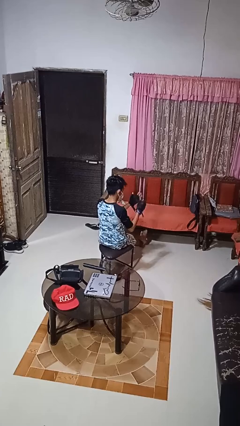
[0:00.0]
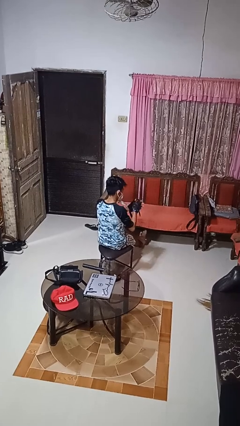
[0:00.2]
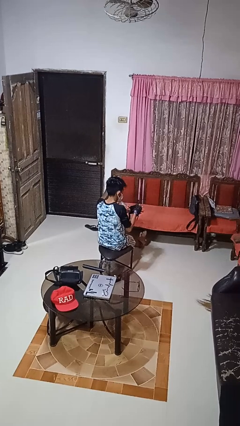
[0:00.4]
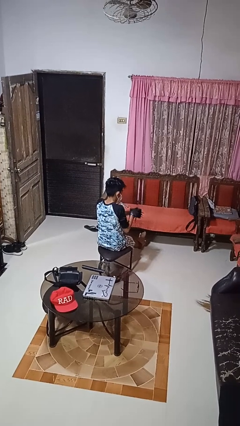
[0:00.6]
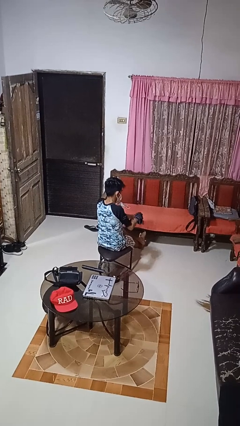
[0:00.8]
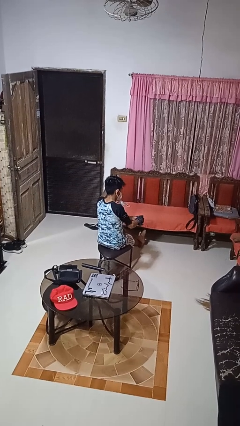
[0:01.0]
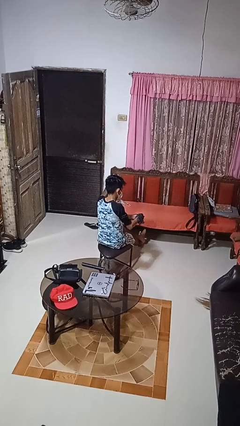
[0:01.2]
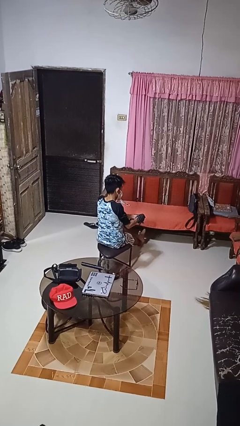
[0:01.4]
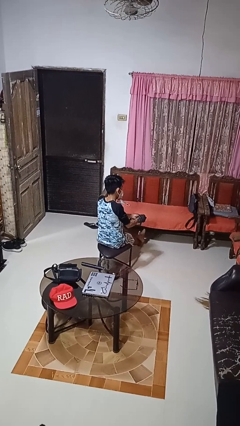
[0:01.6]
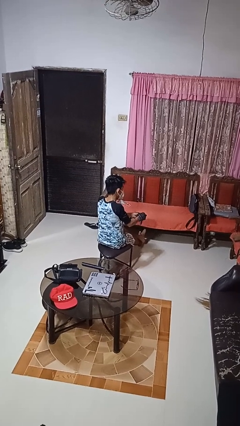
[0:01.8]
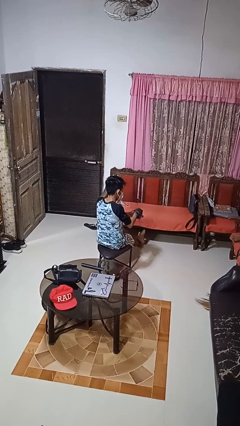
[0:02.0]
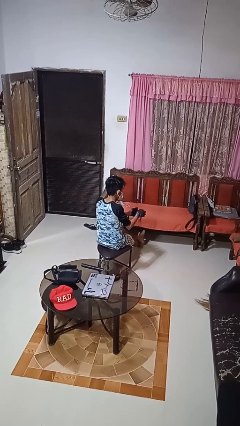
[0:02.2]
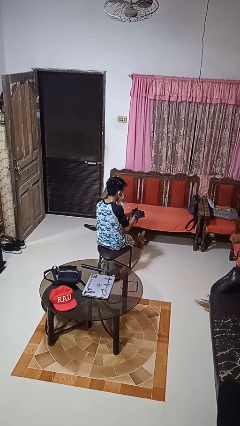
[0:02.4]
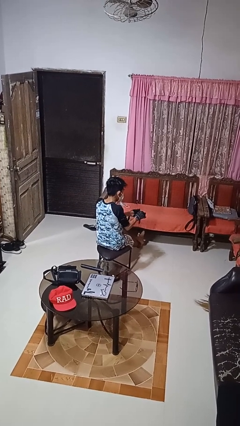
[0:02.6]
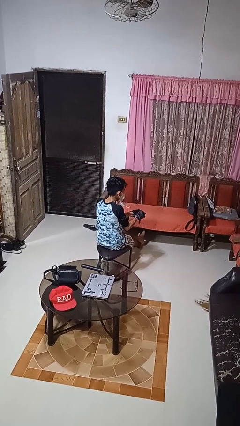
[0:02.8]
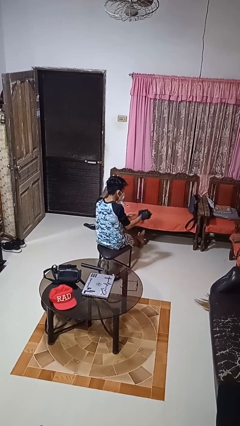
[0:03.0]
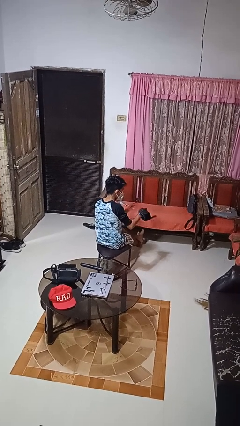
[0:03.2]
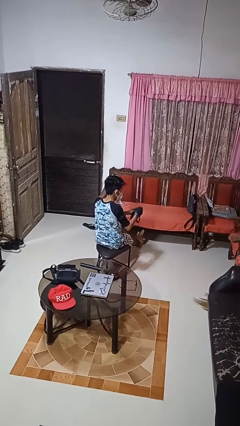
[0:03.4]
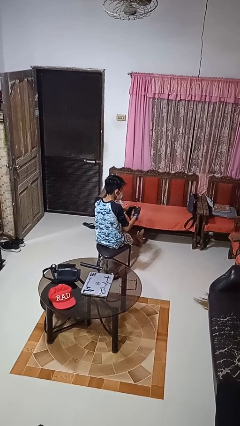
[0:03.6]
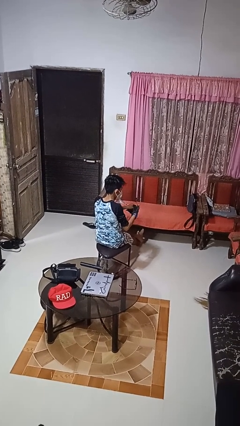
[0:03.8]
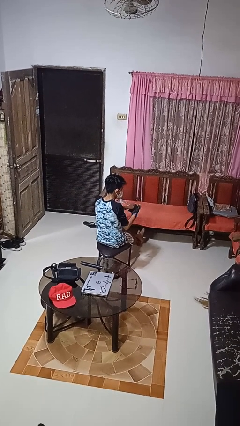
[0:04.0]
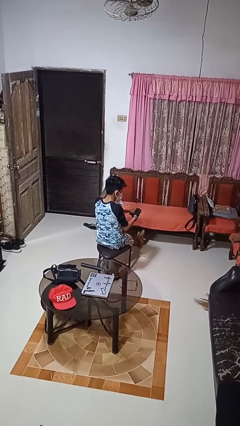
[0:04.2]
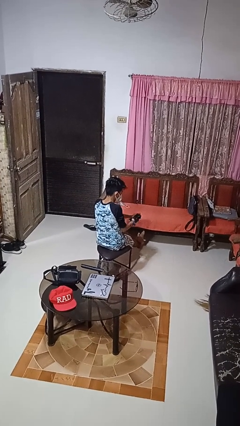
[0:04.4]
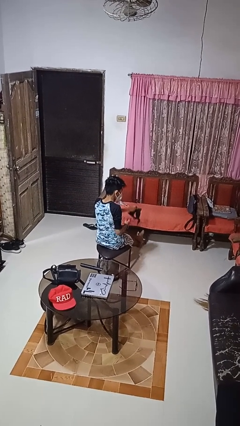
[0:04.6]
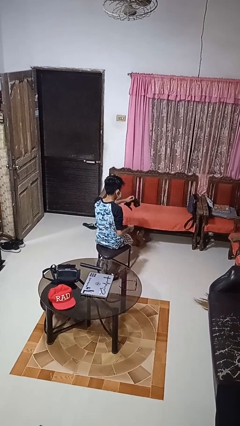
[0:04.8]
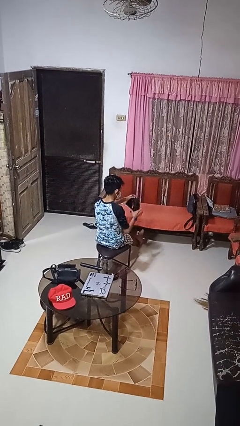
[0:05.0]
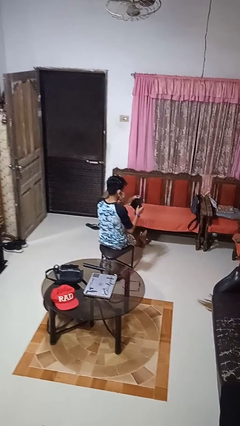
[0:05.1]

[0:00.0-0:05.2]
person takes off gloves

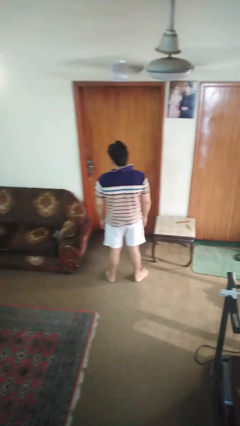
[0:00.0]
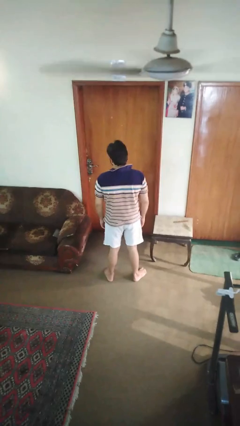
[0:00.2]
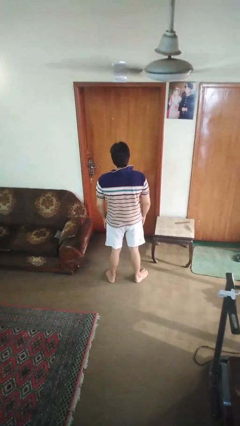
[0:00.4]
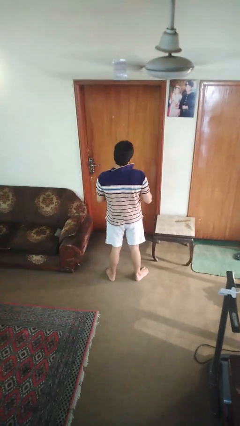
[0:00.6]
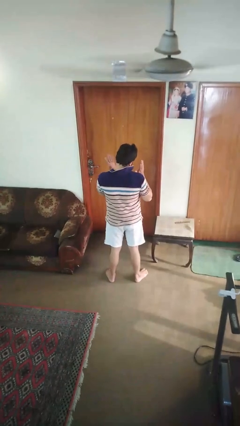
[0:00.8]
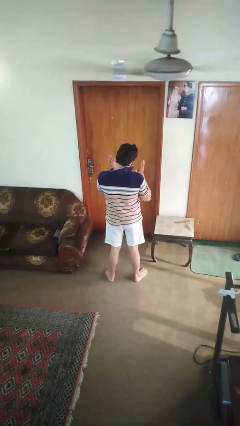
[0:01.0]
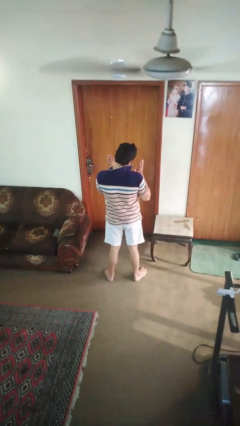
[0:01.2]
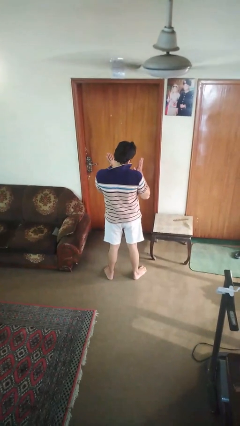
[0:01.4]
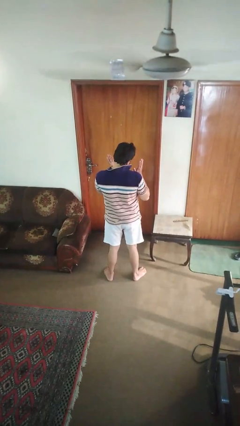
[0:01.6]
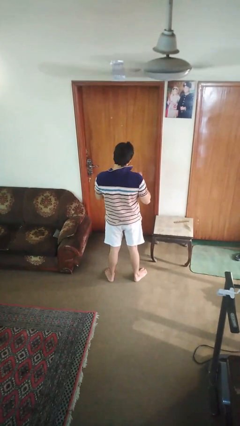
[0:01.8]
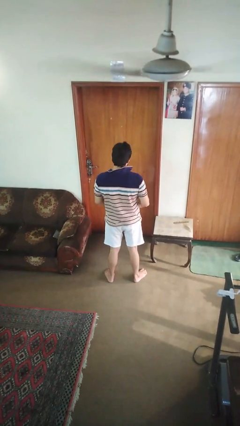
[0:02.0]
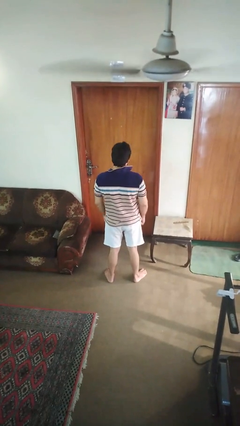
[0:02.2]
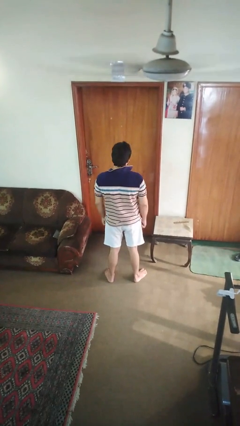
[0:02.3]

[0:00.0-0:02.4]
person shrugs

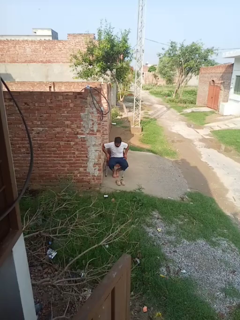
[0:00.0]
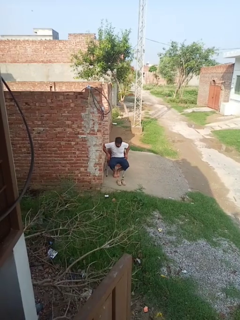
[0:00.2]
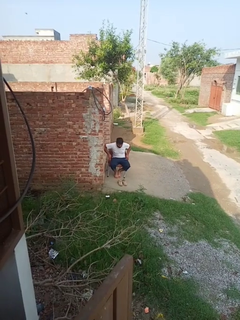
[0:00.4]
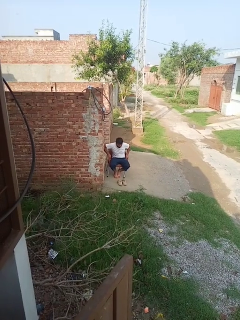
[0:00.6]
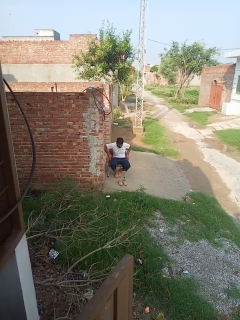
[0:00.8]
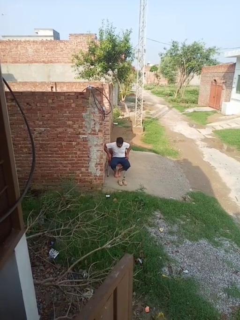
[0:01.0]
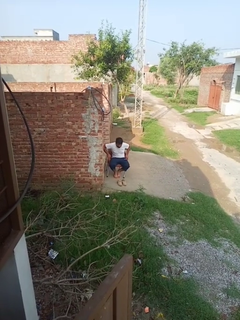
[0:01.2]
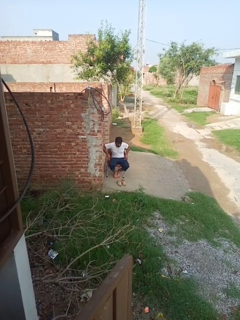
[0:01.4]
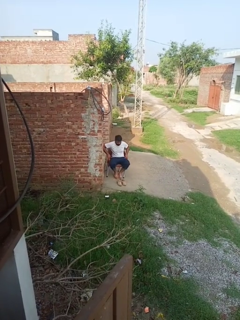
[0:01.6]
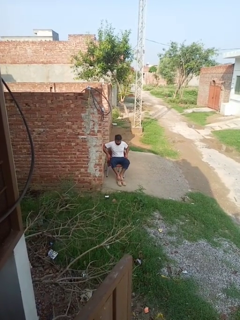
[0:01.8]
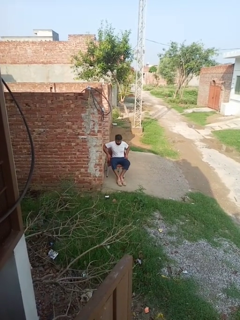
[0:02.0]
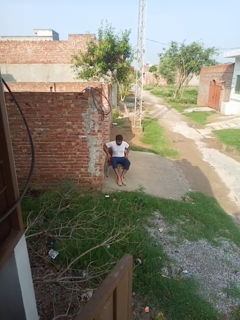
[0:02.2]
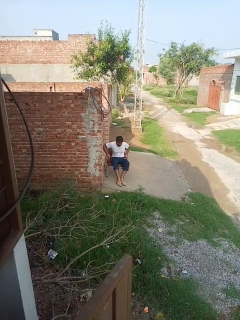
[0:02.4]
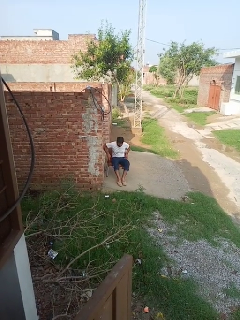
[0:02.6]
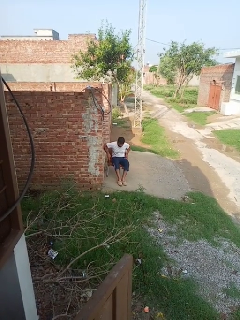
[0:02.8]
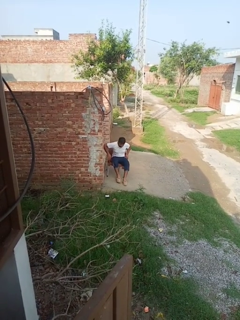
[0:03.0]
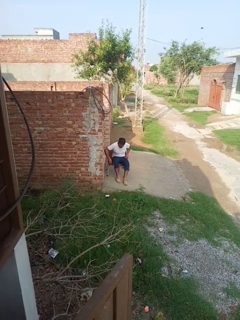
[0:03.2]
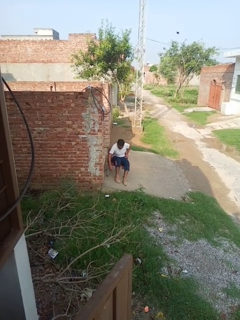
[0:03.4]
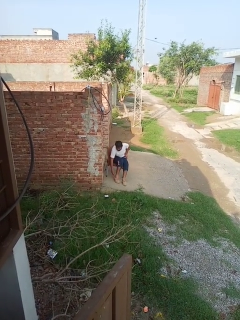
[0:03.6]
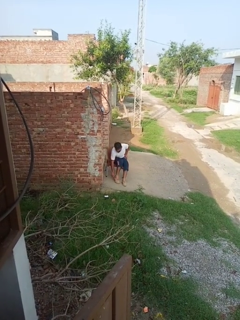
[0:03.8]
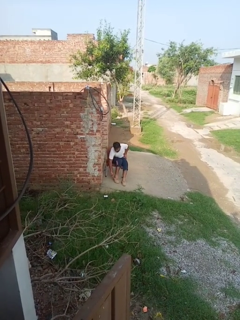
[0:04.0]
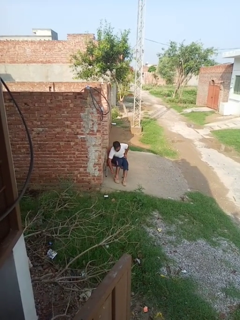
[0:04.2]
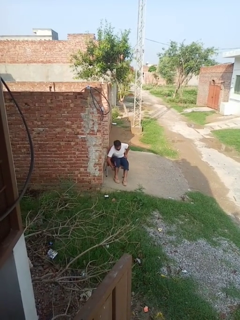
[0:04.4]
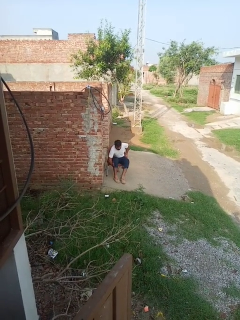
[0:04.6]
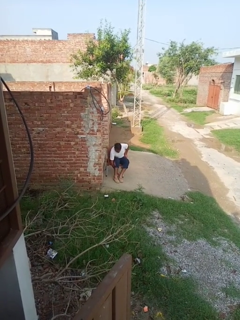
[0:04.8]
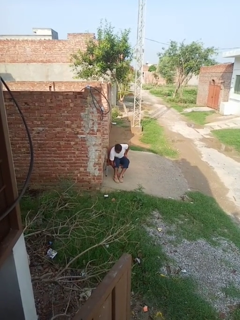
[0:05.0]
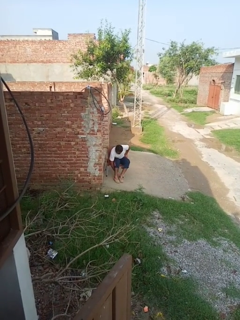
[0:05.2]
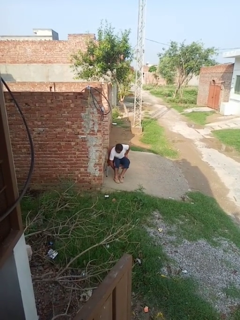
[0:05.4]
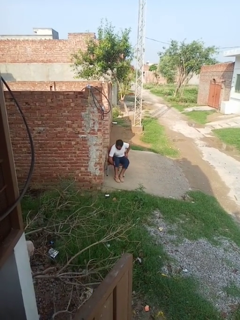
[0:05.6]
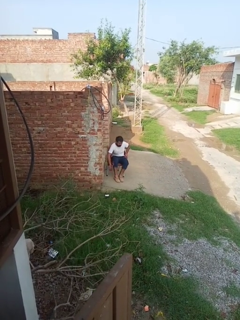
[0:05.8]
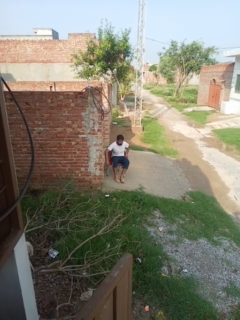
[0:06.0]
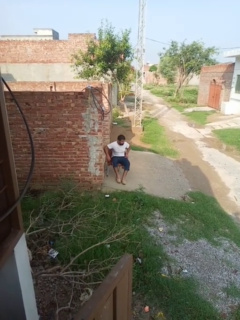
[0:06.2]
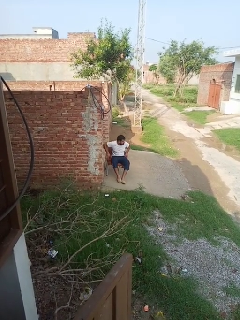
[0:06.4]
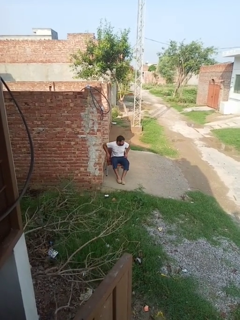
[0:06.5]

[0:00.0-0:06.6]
person puts on shoes

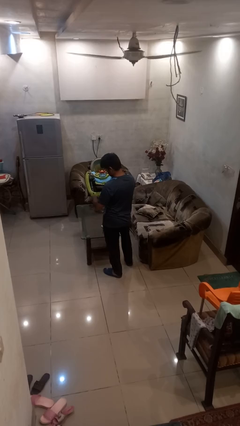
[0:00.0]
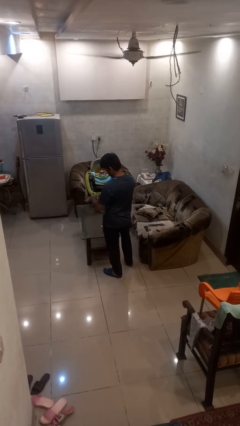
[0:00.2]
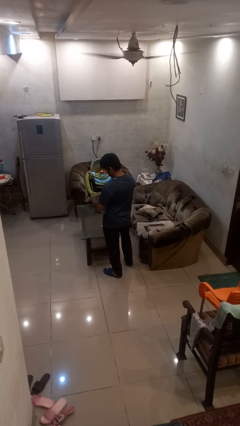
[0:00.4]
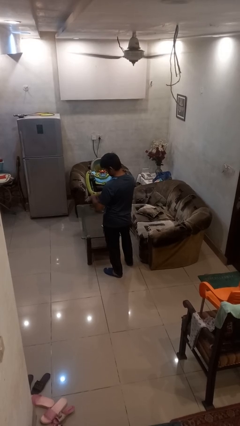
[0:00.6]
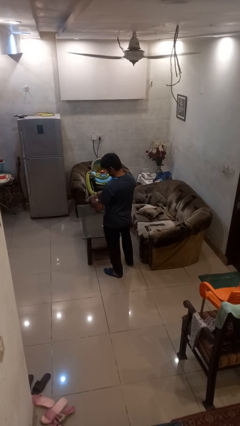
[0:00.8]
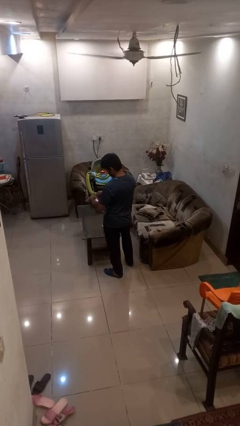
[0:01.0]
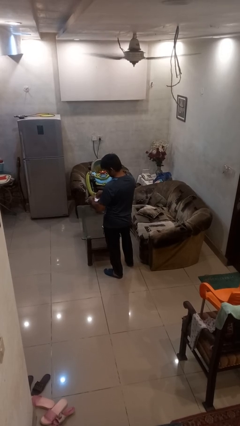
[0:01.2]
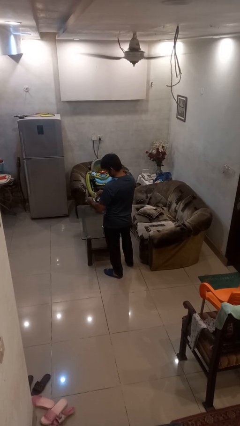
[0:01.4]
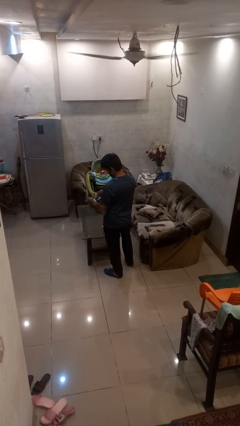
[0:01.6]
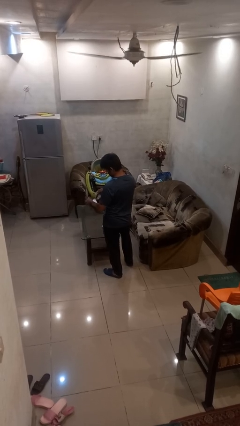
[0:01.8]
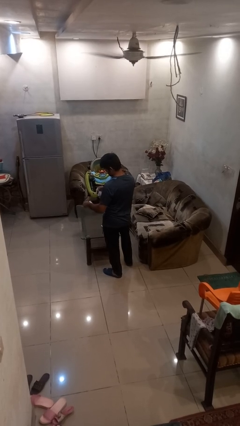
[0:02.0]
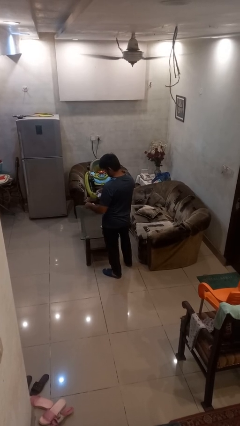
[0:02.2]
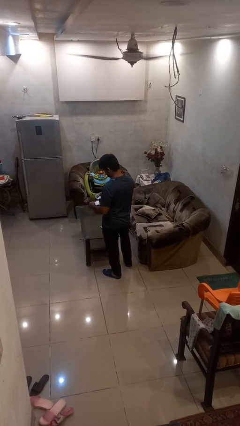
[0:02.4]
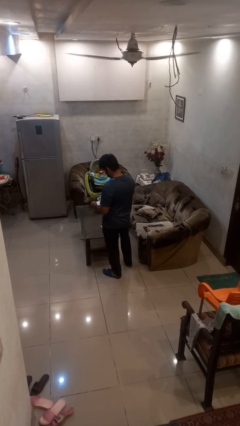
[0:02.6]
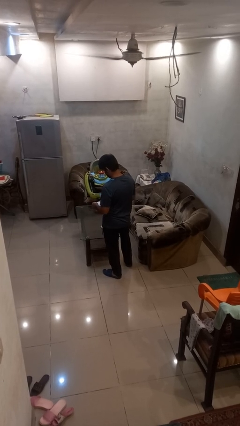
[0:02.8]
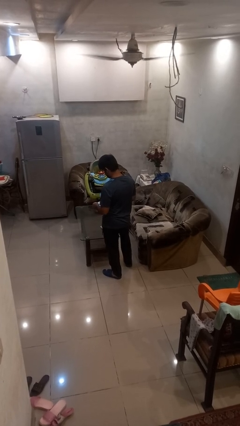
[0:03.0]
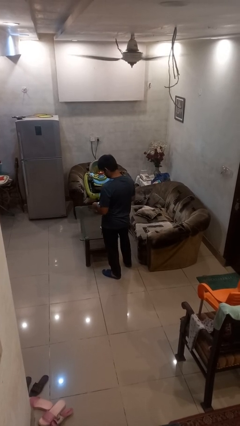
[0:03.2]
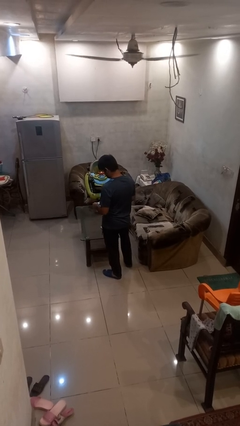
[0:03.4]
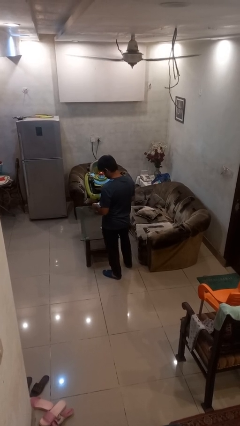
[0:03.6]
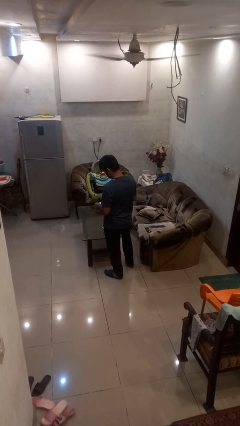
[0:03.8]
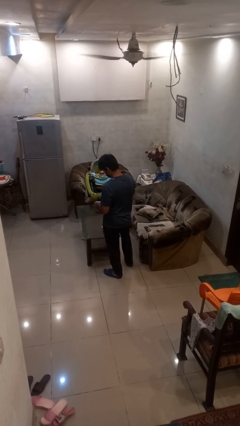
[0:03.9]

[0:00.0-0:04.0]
person tears paper

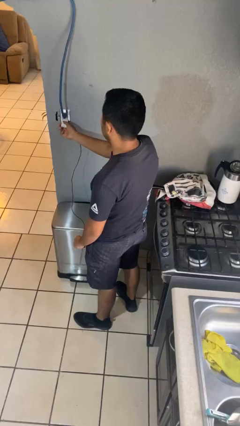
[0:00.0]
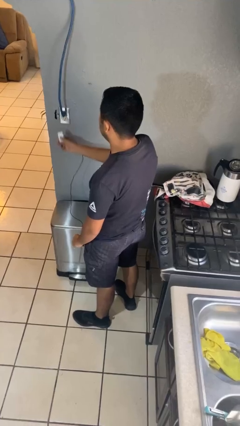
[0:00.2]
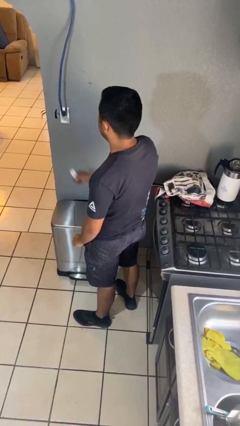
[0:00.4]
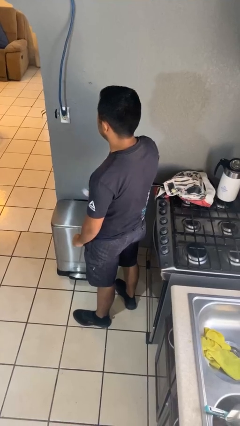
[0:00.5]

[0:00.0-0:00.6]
person unplugs from electrical socket

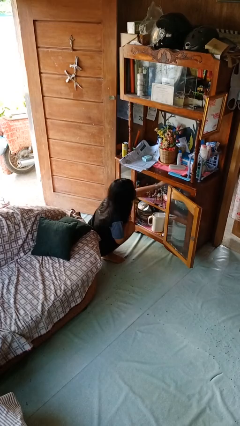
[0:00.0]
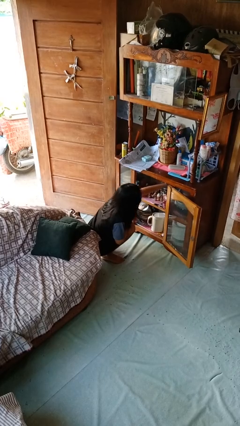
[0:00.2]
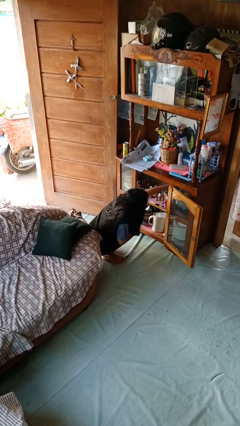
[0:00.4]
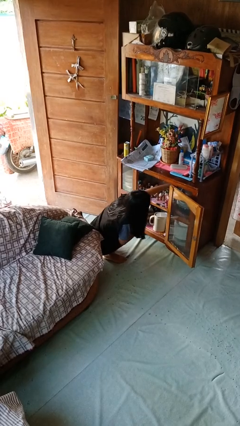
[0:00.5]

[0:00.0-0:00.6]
person searches in cabinet
